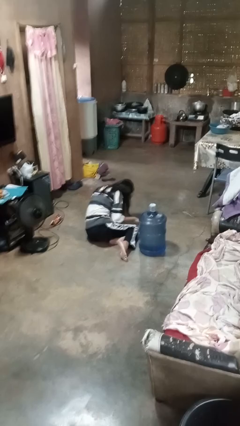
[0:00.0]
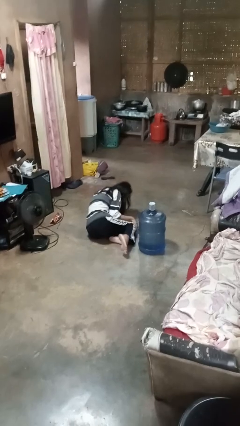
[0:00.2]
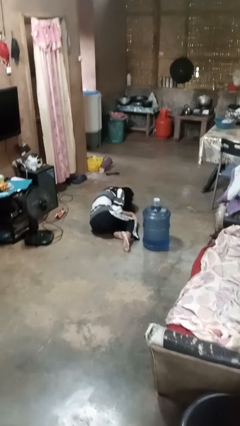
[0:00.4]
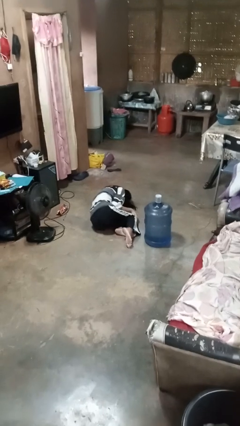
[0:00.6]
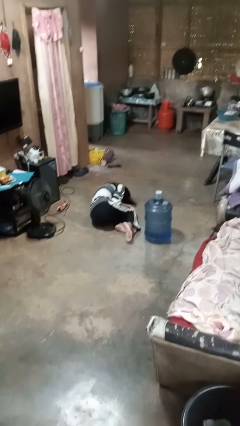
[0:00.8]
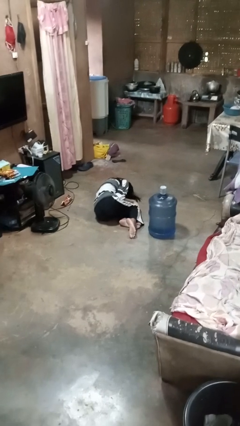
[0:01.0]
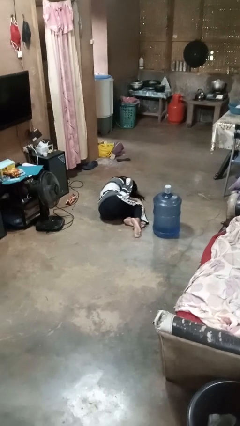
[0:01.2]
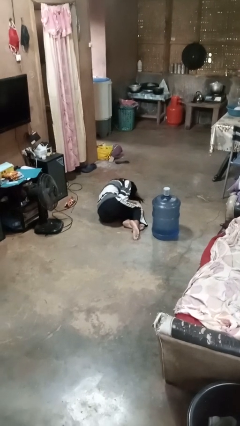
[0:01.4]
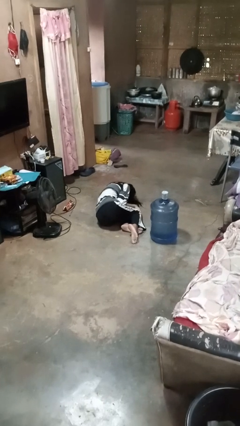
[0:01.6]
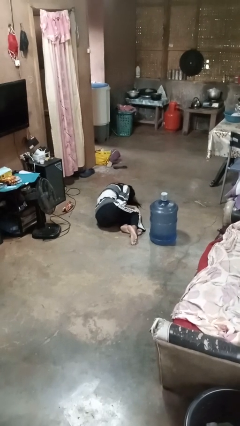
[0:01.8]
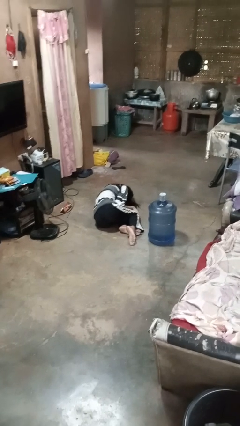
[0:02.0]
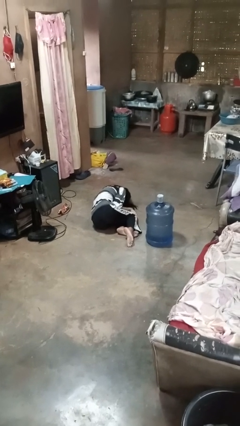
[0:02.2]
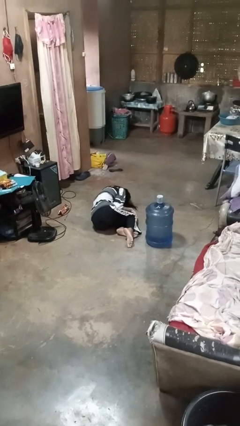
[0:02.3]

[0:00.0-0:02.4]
person lies down on floor

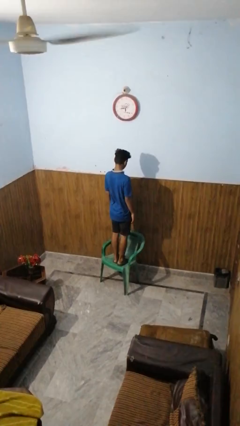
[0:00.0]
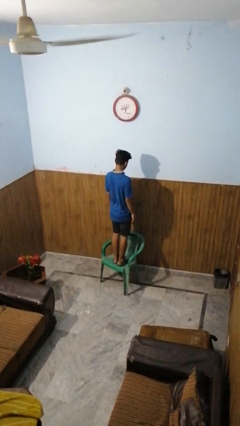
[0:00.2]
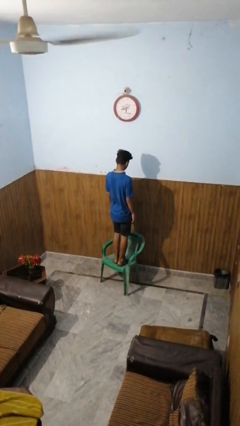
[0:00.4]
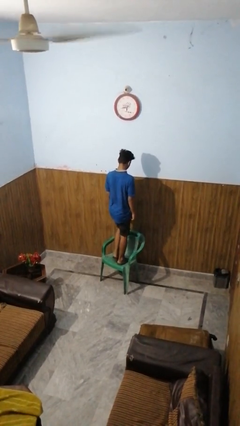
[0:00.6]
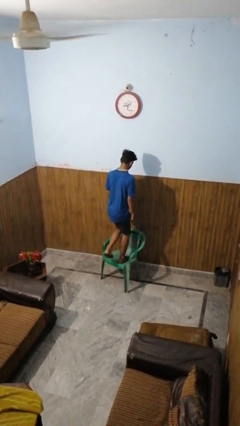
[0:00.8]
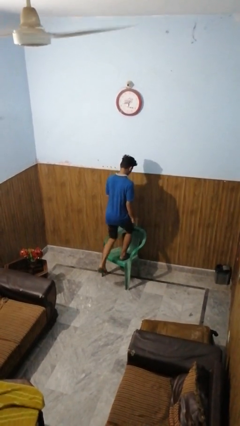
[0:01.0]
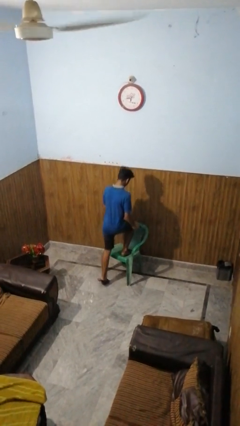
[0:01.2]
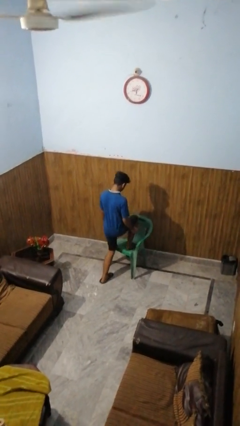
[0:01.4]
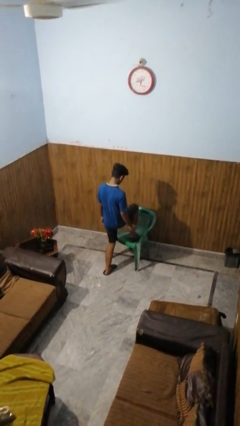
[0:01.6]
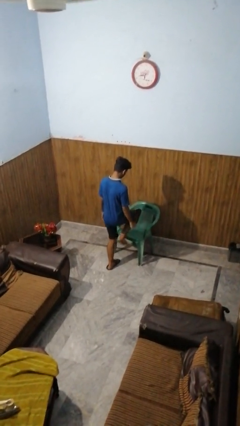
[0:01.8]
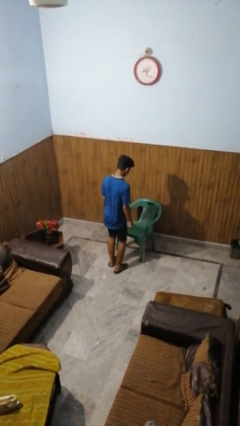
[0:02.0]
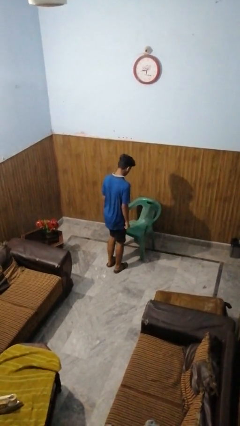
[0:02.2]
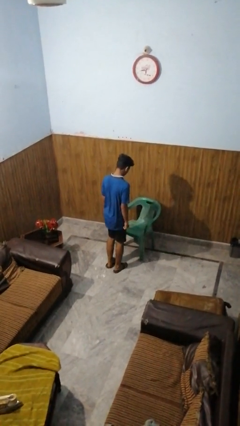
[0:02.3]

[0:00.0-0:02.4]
person climbs off chair

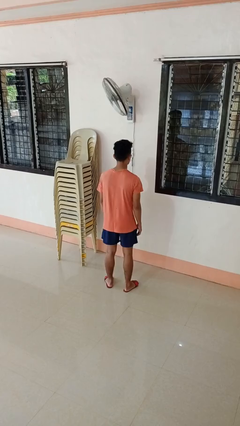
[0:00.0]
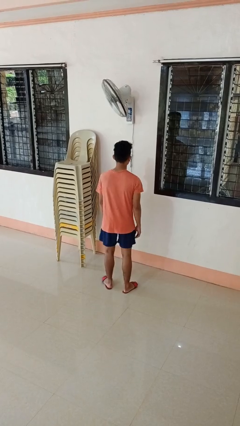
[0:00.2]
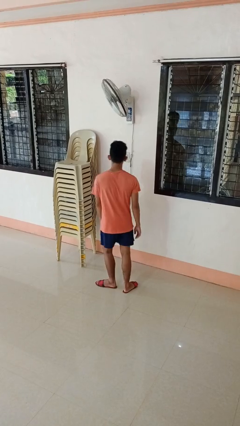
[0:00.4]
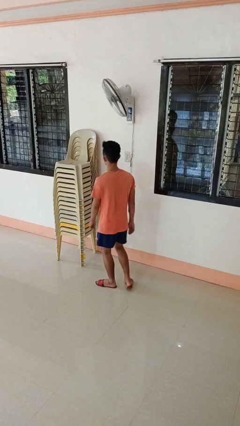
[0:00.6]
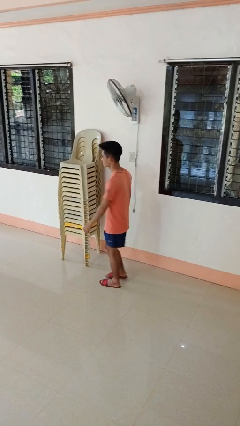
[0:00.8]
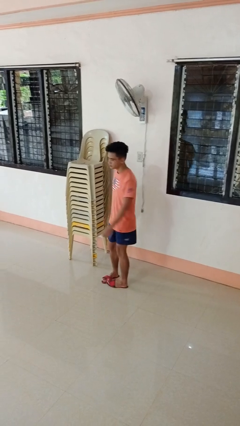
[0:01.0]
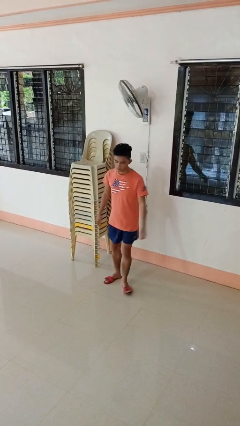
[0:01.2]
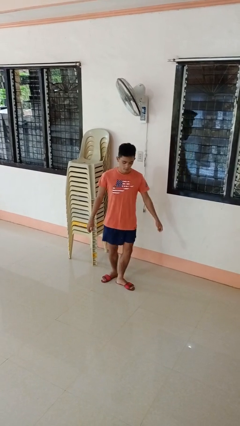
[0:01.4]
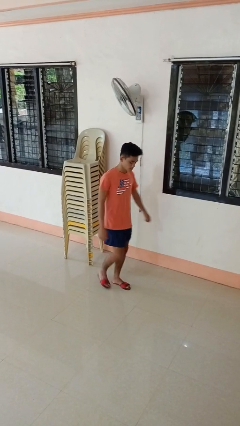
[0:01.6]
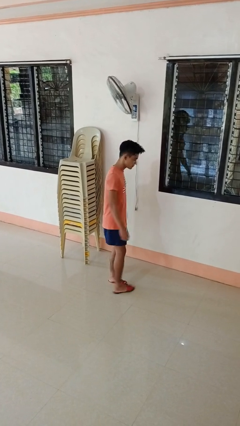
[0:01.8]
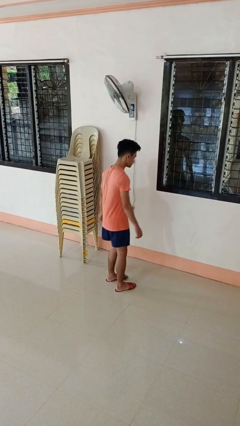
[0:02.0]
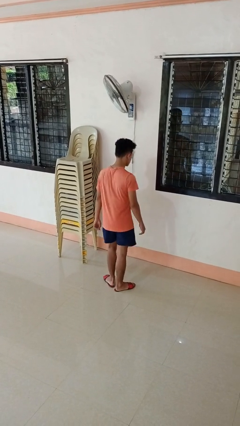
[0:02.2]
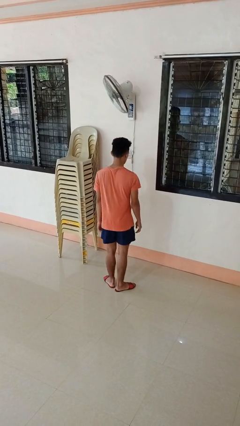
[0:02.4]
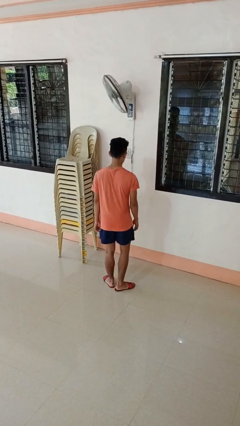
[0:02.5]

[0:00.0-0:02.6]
person twirls

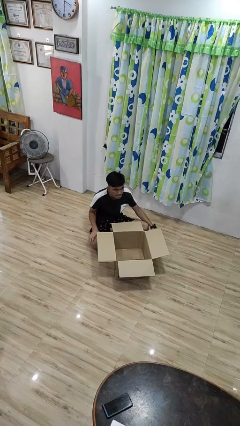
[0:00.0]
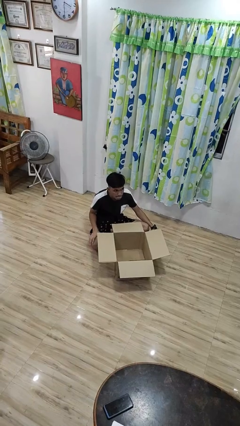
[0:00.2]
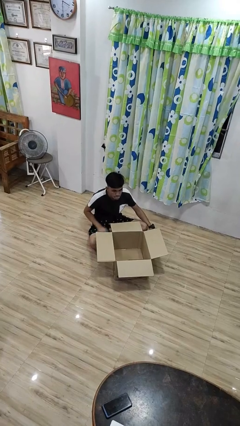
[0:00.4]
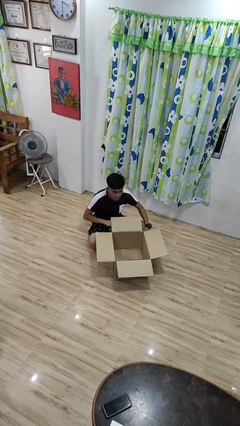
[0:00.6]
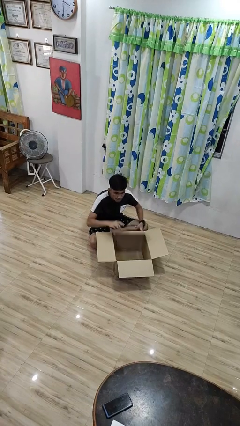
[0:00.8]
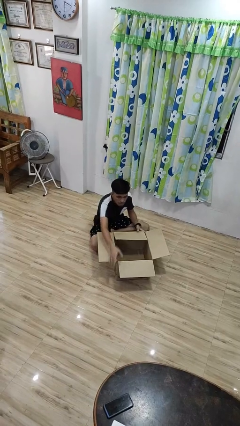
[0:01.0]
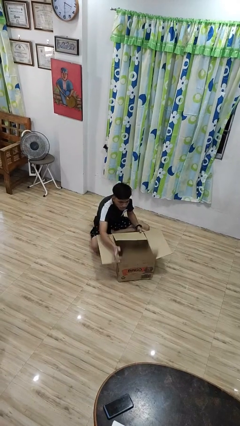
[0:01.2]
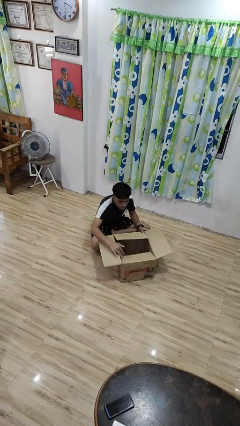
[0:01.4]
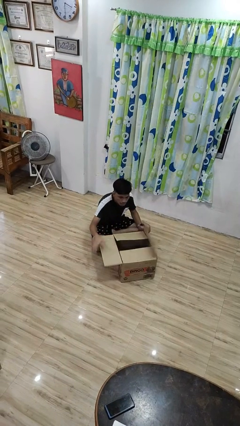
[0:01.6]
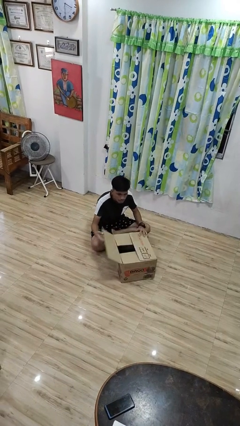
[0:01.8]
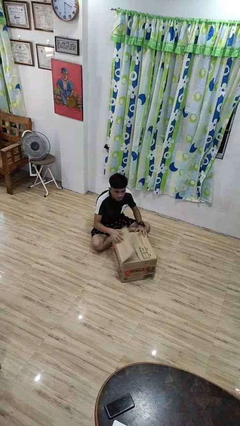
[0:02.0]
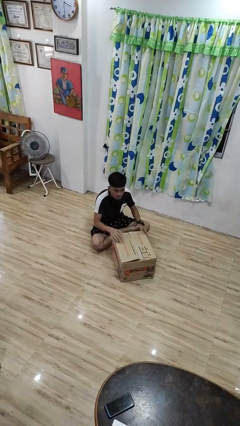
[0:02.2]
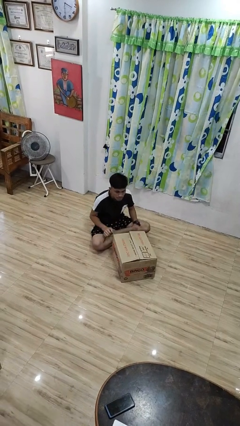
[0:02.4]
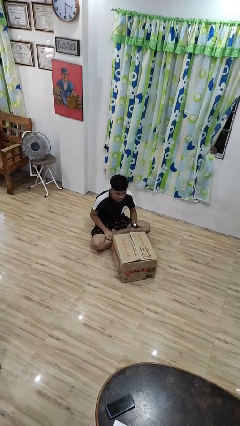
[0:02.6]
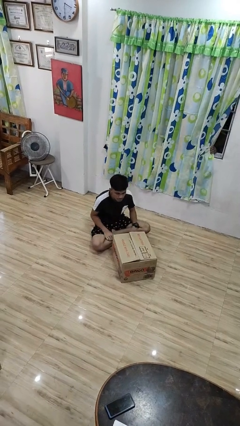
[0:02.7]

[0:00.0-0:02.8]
person closes box

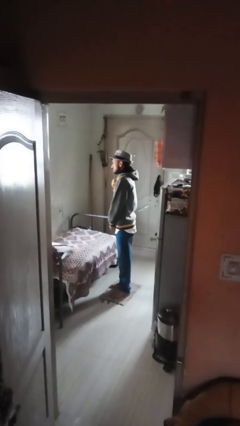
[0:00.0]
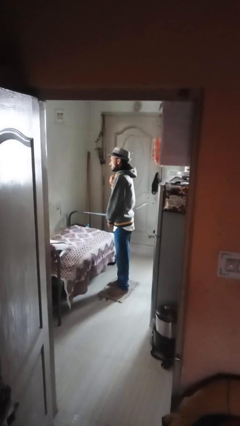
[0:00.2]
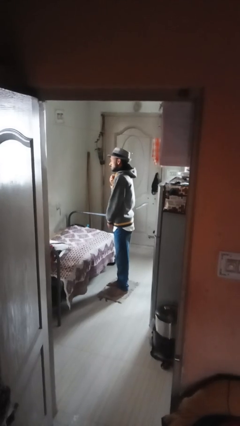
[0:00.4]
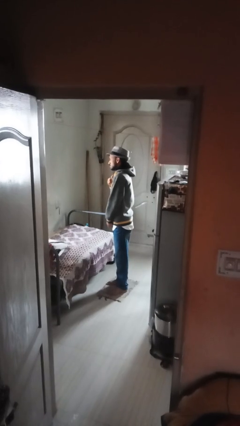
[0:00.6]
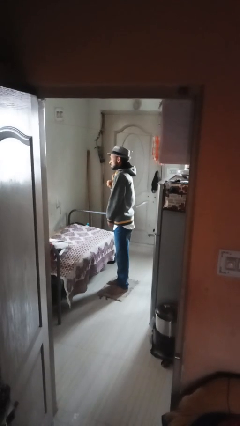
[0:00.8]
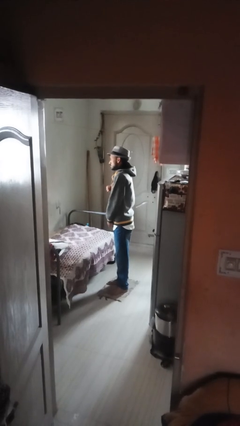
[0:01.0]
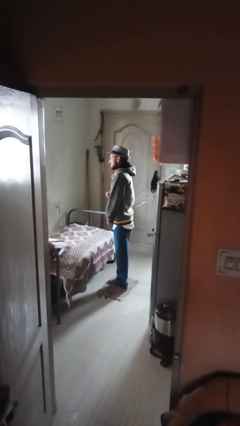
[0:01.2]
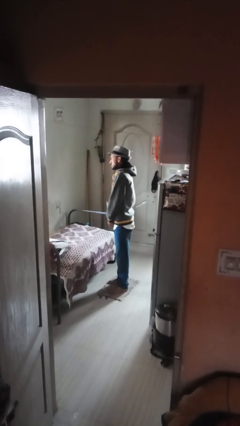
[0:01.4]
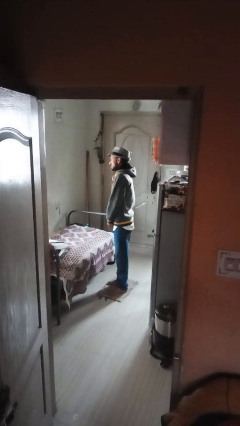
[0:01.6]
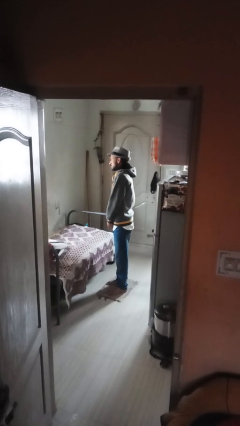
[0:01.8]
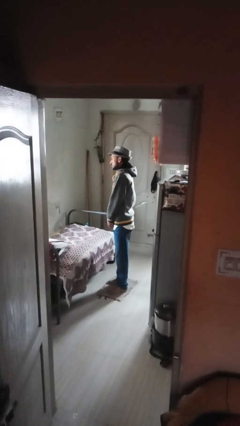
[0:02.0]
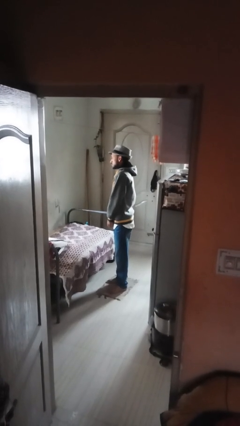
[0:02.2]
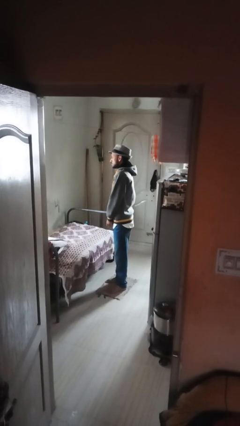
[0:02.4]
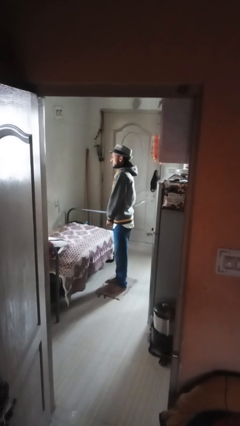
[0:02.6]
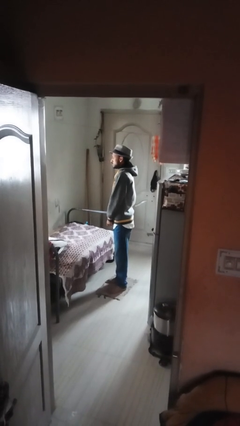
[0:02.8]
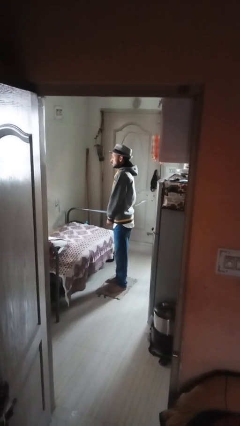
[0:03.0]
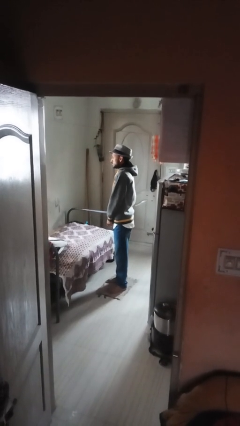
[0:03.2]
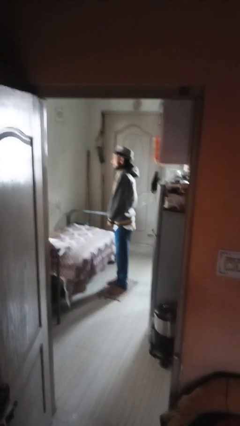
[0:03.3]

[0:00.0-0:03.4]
person unzips jacket

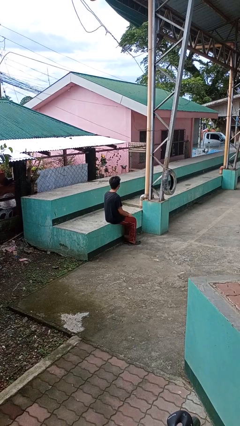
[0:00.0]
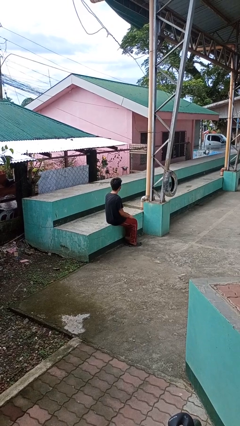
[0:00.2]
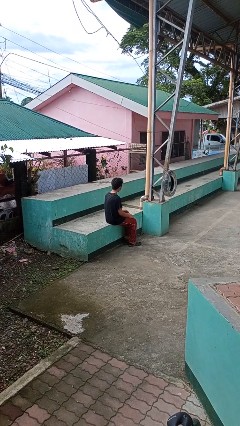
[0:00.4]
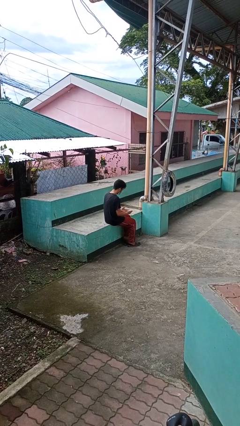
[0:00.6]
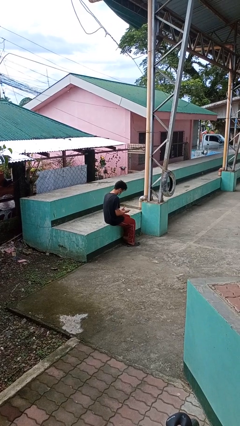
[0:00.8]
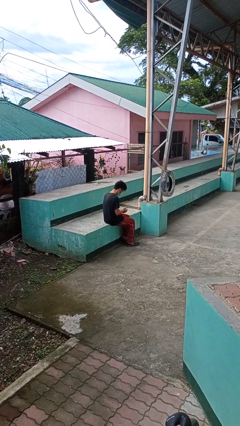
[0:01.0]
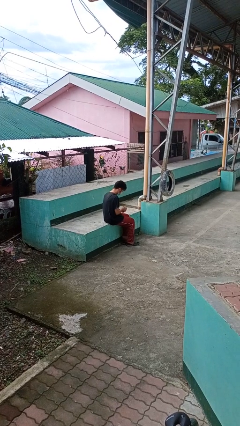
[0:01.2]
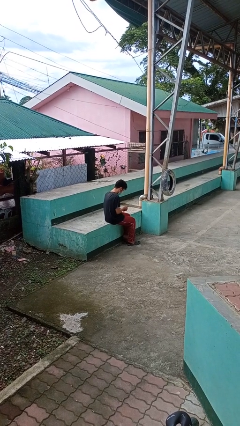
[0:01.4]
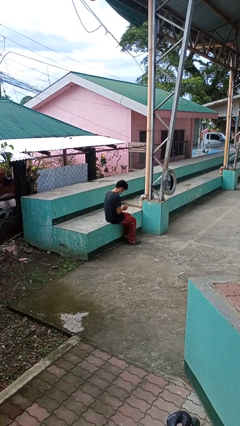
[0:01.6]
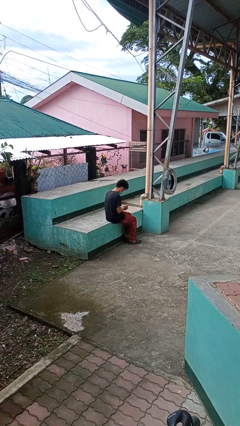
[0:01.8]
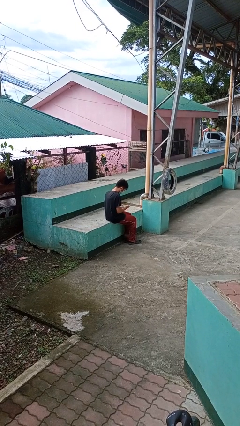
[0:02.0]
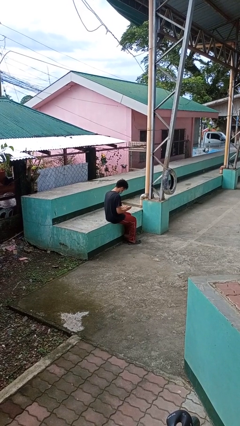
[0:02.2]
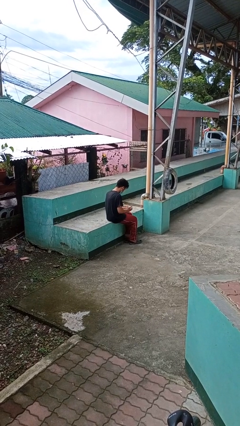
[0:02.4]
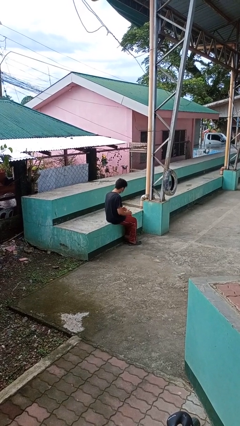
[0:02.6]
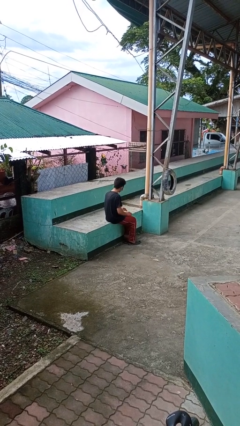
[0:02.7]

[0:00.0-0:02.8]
person looks at hands in lap
